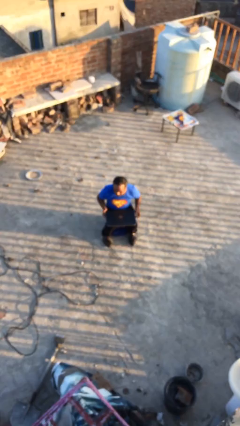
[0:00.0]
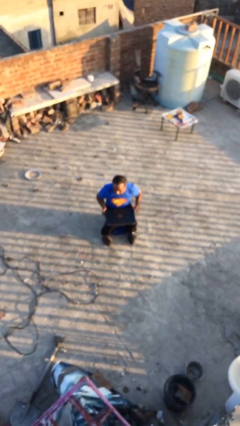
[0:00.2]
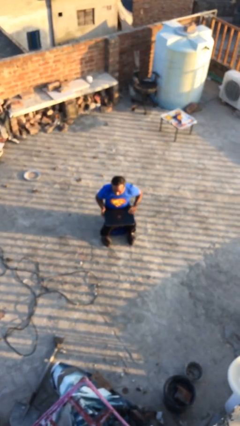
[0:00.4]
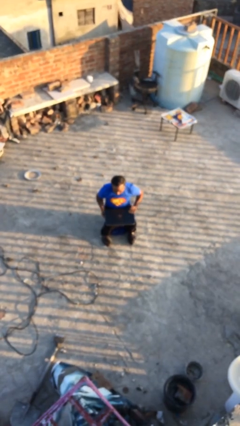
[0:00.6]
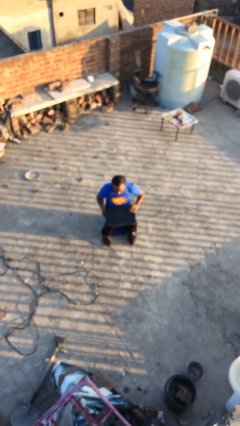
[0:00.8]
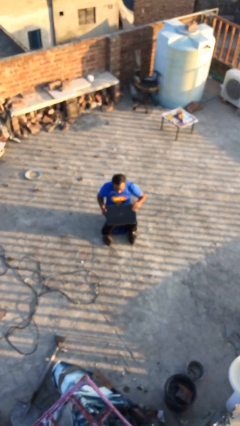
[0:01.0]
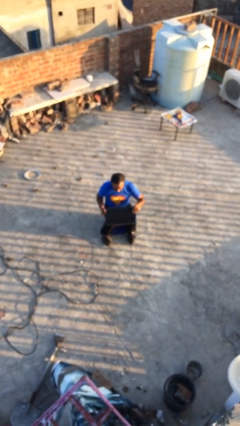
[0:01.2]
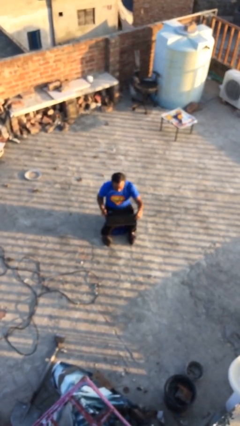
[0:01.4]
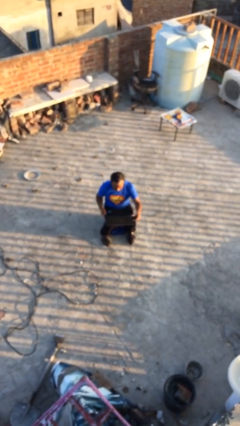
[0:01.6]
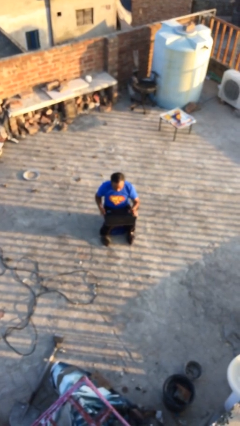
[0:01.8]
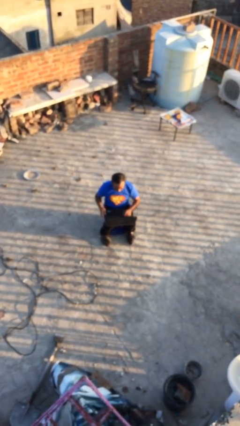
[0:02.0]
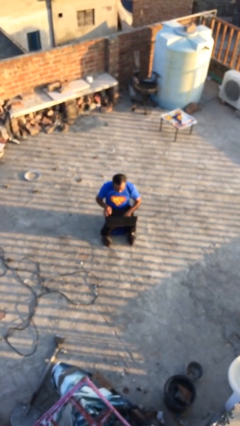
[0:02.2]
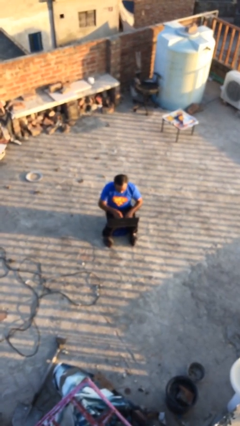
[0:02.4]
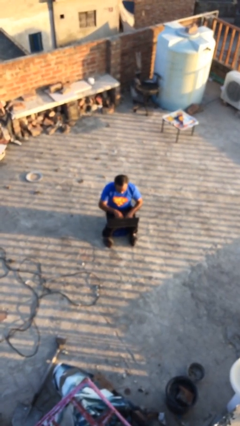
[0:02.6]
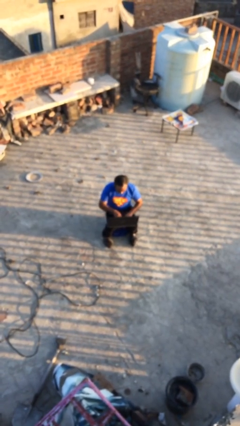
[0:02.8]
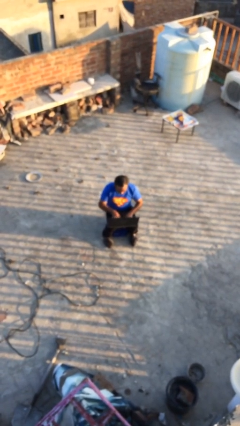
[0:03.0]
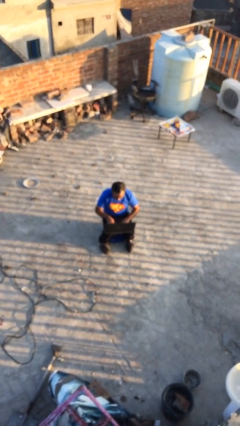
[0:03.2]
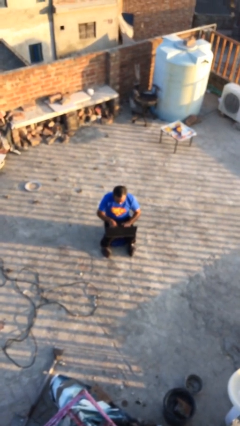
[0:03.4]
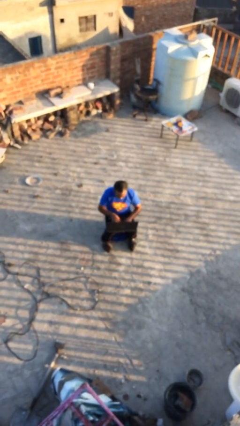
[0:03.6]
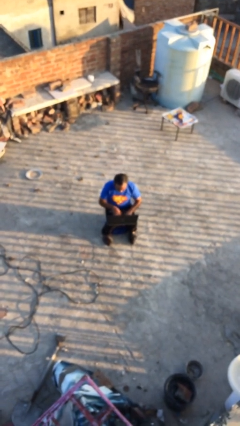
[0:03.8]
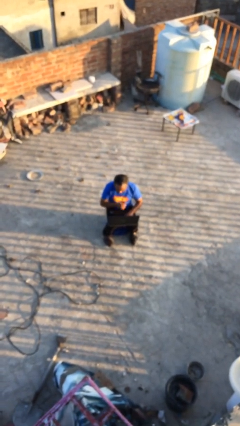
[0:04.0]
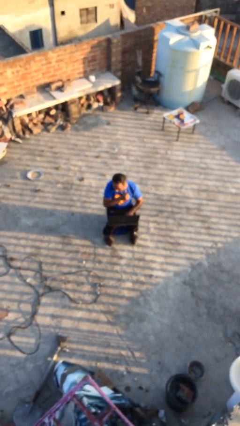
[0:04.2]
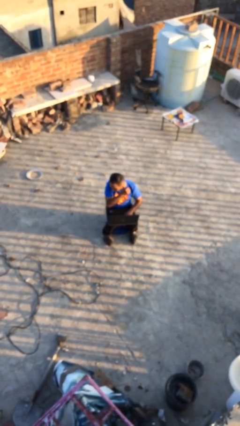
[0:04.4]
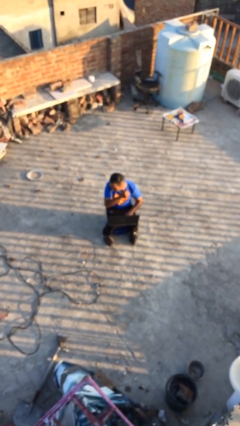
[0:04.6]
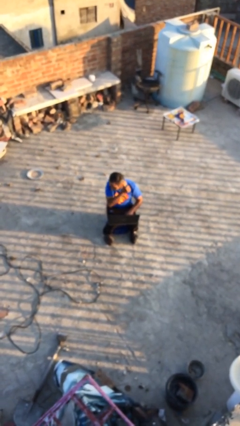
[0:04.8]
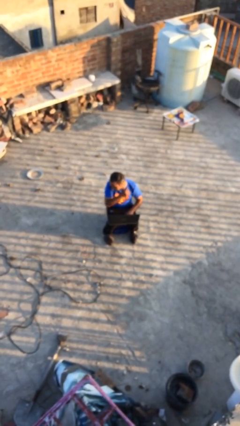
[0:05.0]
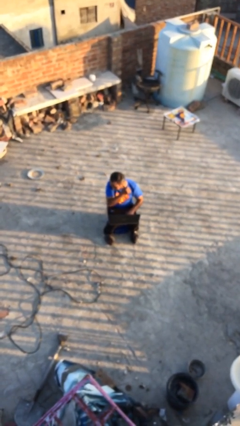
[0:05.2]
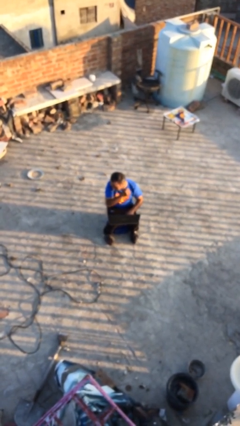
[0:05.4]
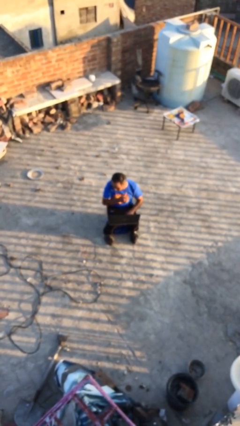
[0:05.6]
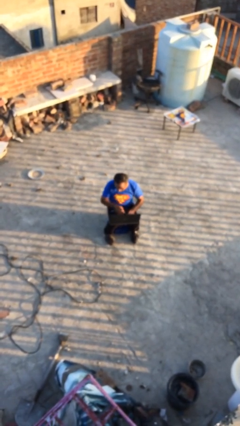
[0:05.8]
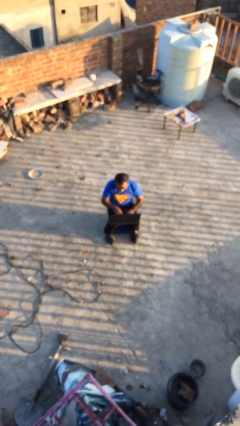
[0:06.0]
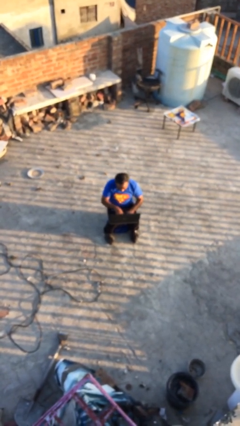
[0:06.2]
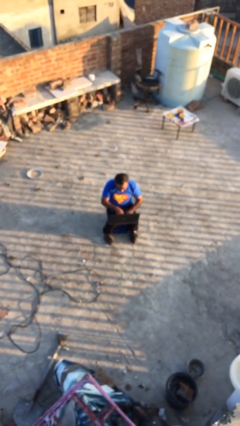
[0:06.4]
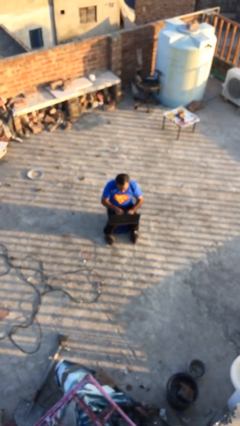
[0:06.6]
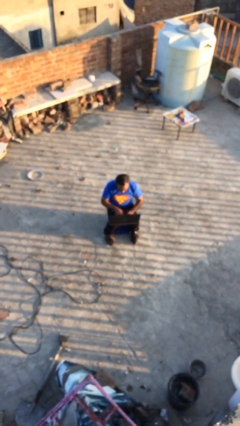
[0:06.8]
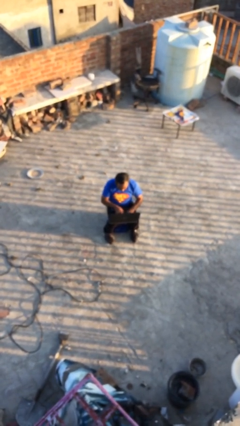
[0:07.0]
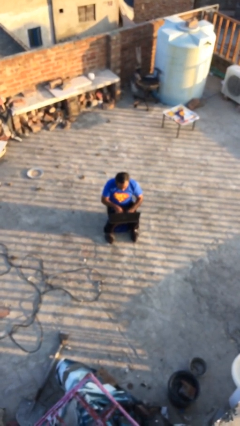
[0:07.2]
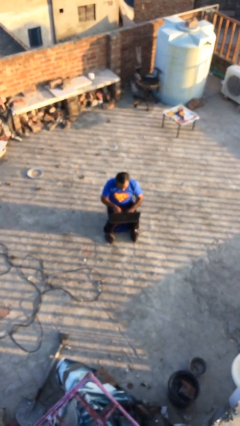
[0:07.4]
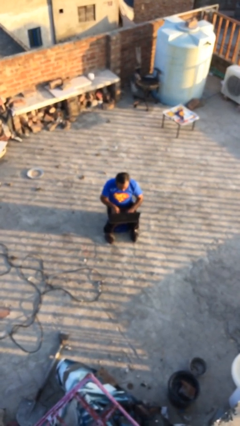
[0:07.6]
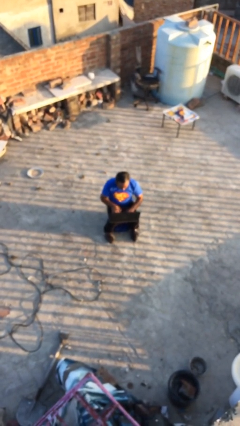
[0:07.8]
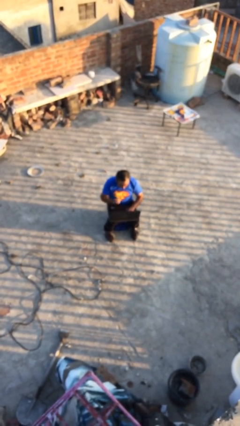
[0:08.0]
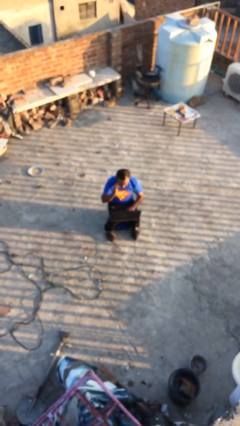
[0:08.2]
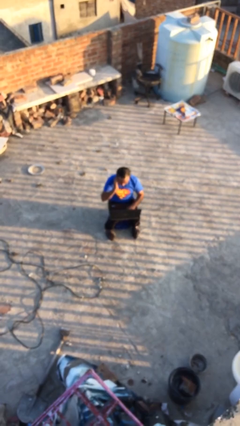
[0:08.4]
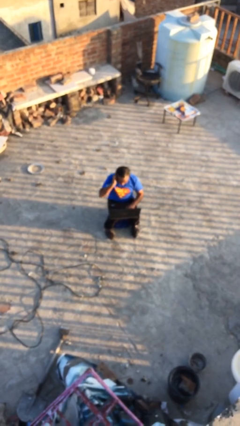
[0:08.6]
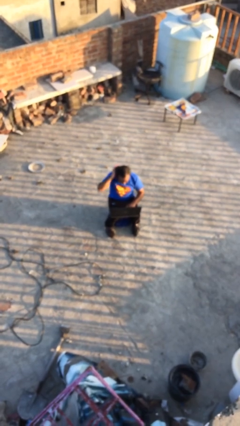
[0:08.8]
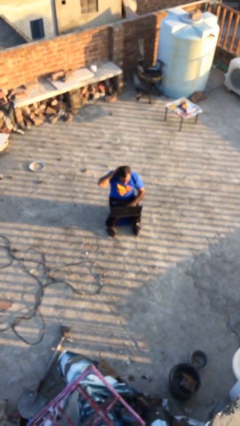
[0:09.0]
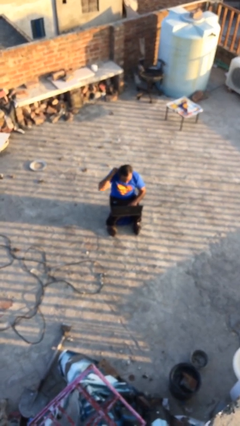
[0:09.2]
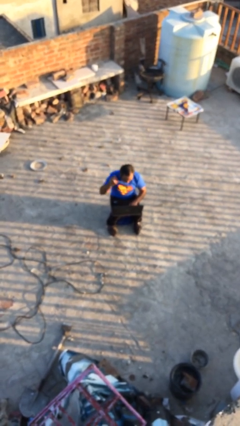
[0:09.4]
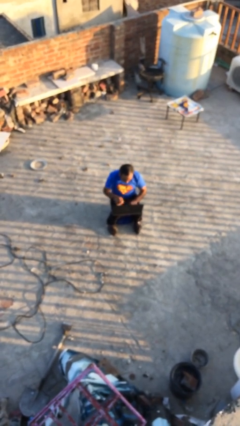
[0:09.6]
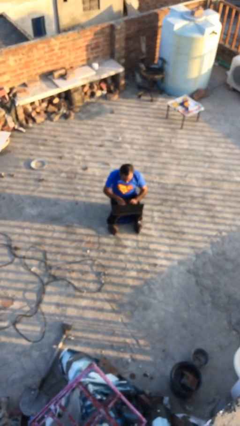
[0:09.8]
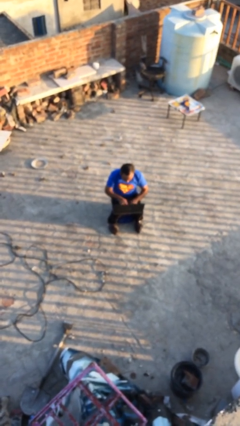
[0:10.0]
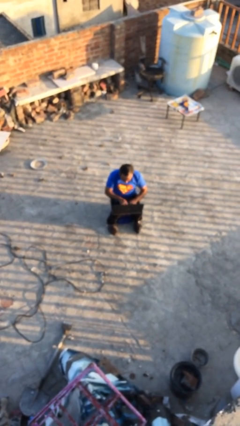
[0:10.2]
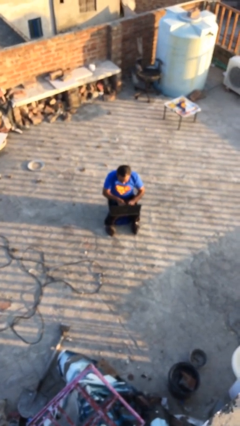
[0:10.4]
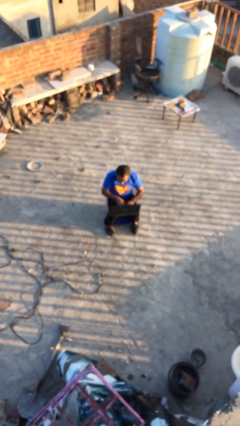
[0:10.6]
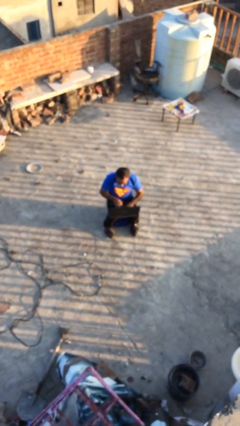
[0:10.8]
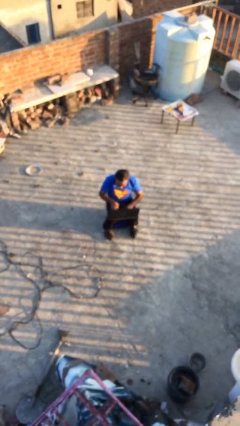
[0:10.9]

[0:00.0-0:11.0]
person interacts with laptop

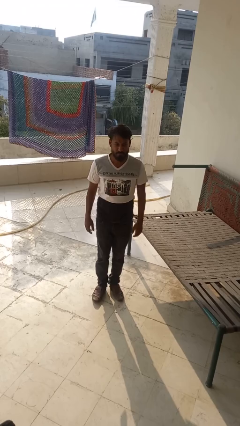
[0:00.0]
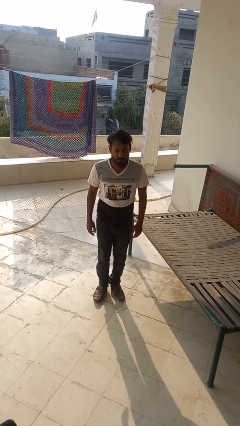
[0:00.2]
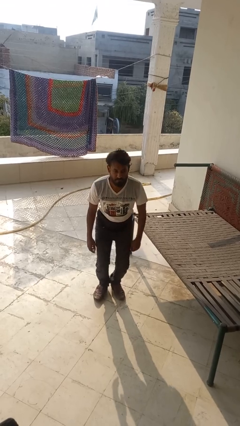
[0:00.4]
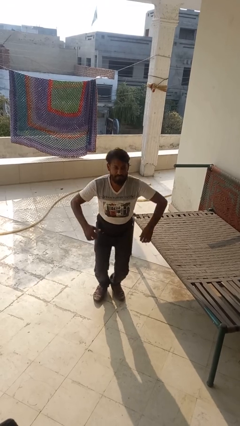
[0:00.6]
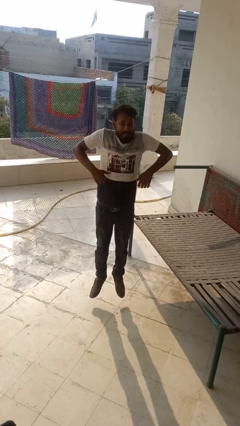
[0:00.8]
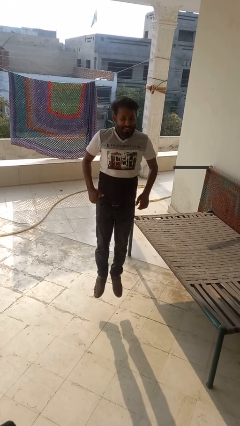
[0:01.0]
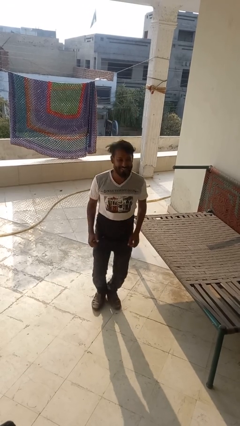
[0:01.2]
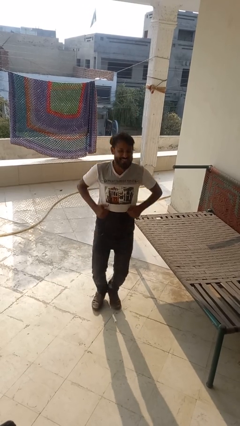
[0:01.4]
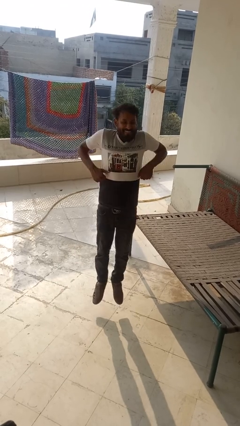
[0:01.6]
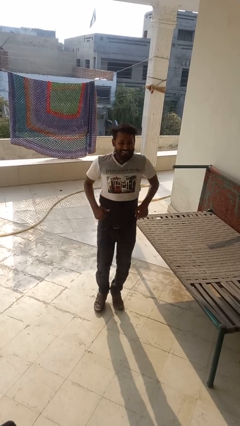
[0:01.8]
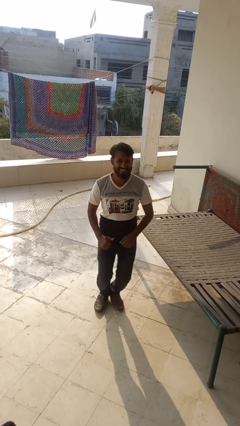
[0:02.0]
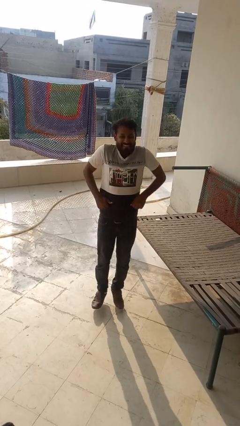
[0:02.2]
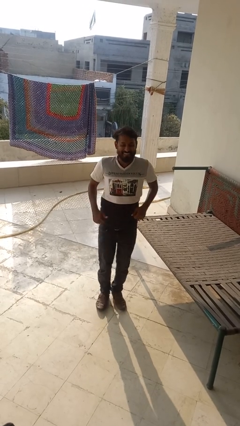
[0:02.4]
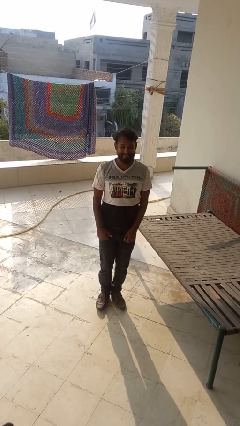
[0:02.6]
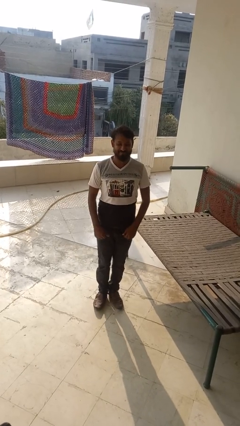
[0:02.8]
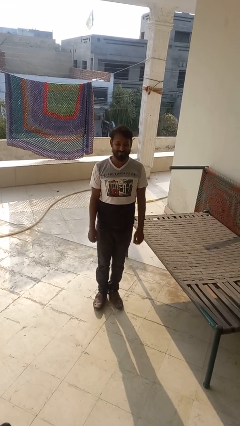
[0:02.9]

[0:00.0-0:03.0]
person jumps

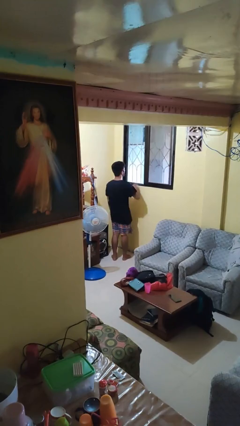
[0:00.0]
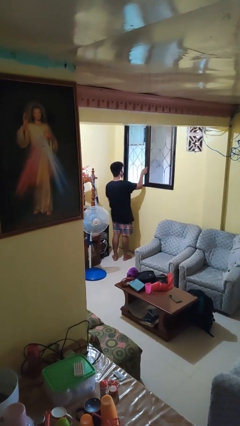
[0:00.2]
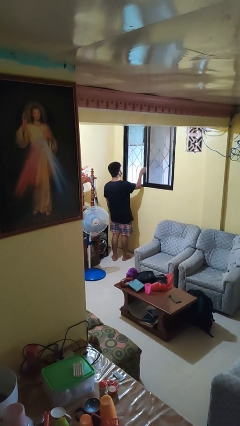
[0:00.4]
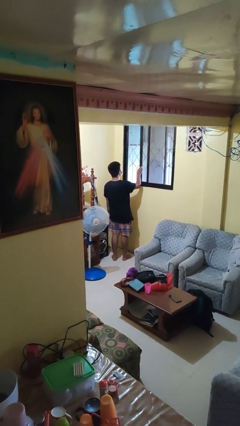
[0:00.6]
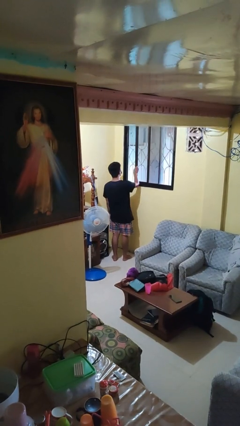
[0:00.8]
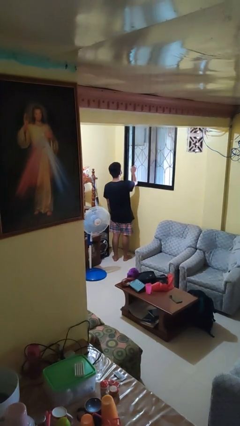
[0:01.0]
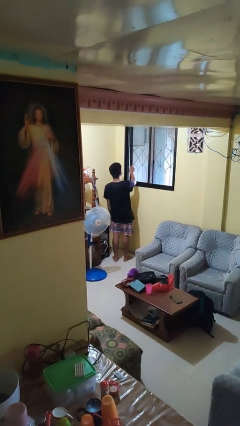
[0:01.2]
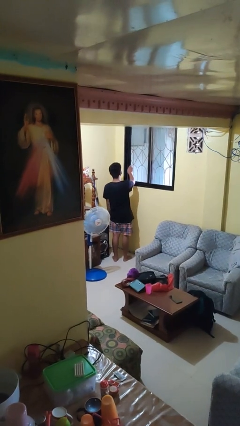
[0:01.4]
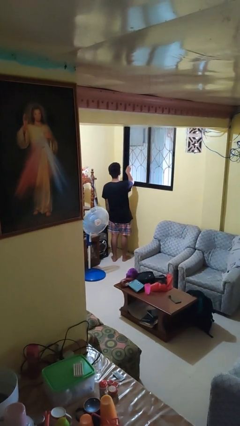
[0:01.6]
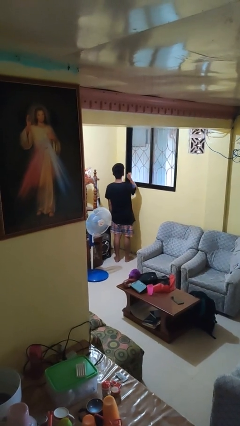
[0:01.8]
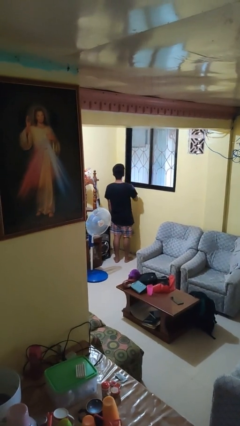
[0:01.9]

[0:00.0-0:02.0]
person closes home window

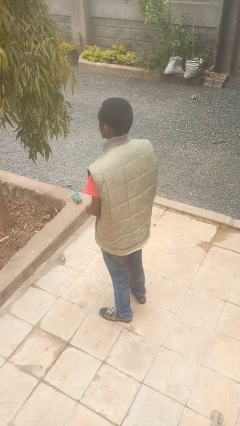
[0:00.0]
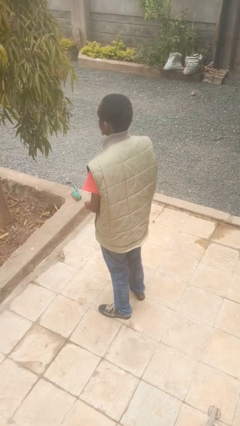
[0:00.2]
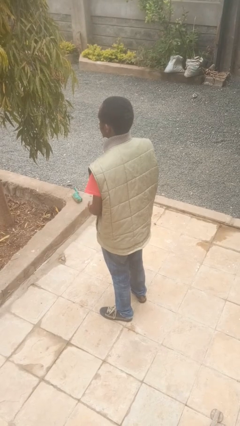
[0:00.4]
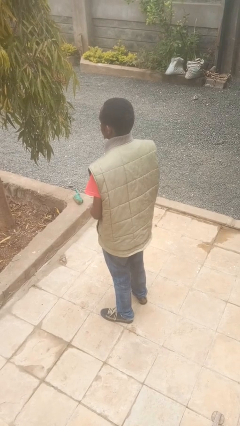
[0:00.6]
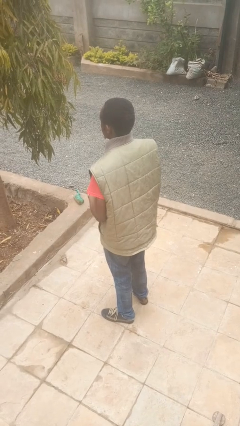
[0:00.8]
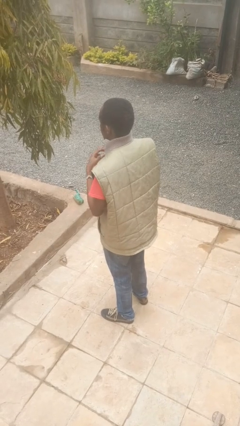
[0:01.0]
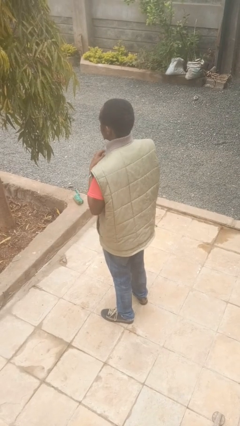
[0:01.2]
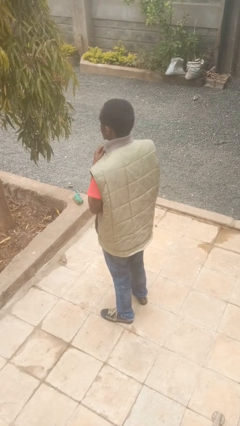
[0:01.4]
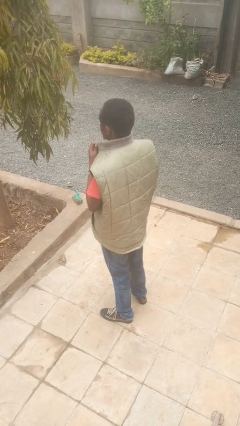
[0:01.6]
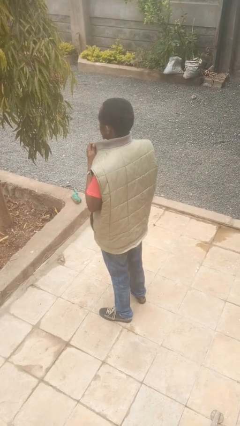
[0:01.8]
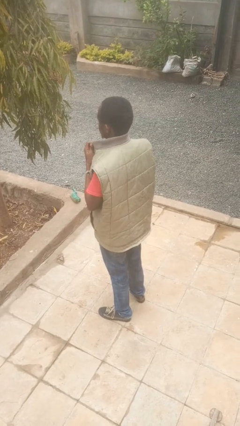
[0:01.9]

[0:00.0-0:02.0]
person unzips jacket
